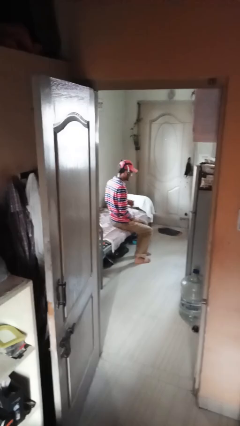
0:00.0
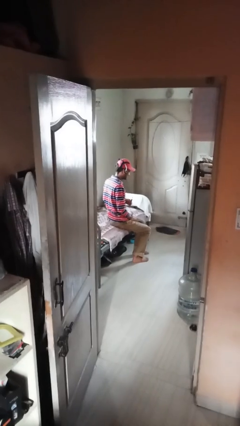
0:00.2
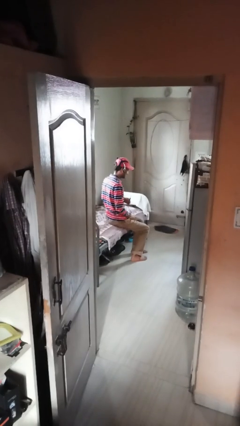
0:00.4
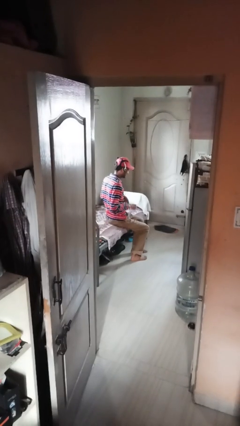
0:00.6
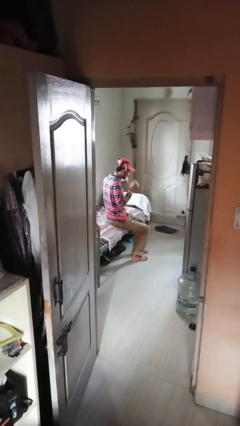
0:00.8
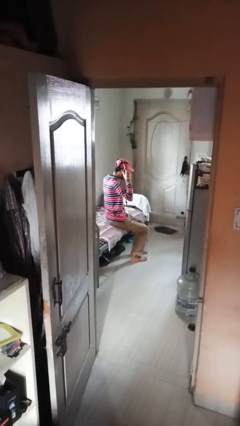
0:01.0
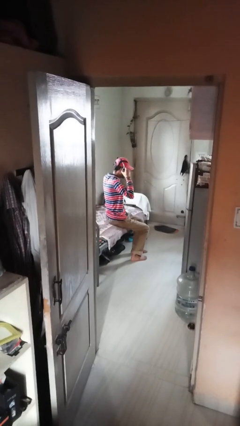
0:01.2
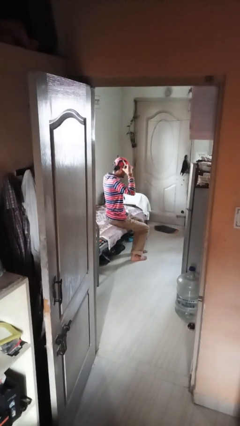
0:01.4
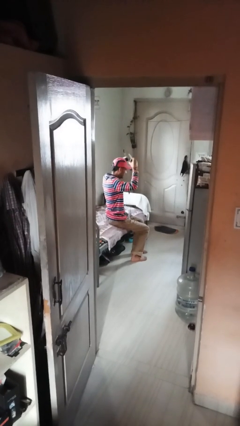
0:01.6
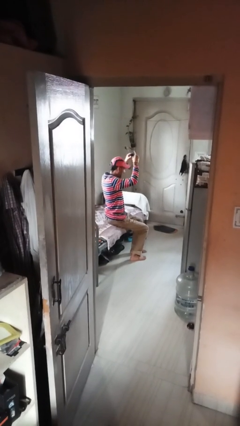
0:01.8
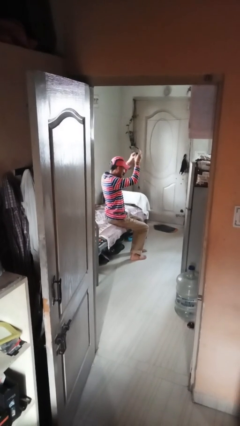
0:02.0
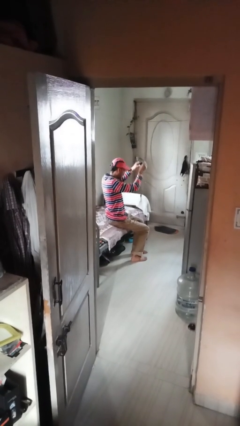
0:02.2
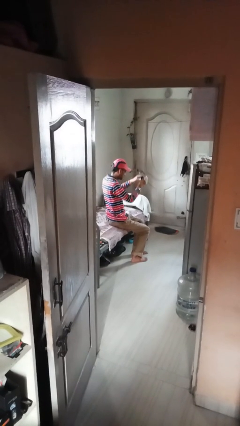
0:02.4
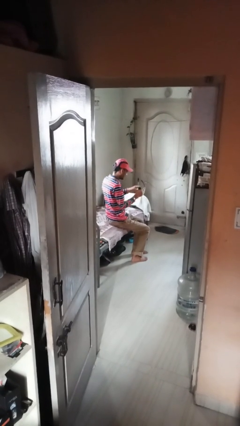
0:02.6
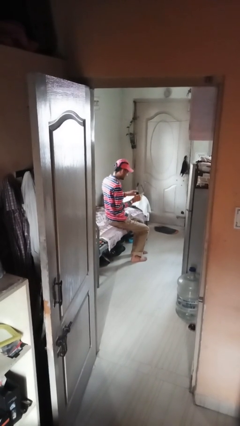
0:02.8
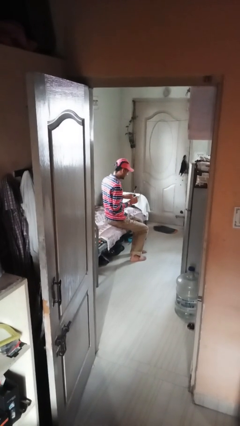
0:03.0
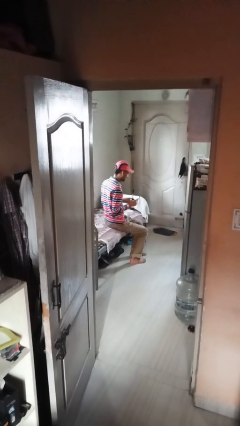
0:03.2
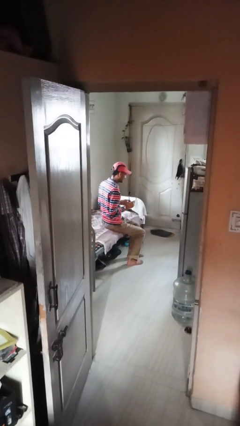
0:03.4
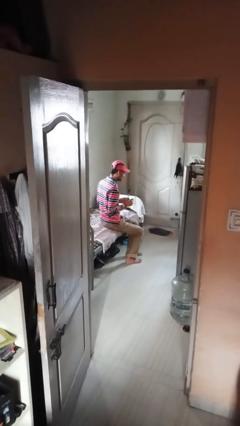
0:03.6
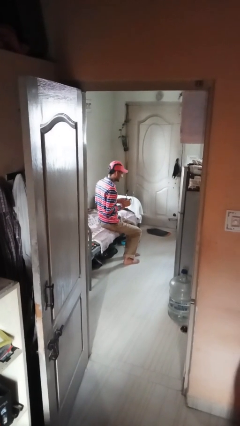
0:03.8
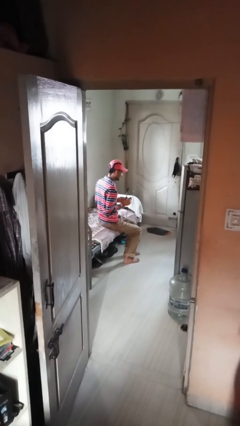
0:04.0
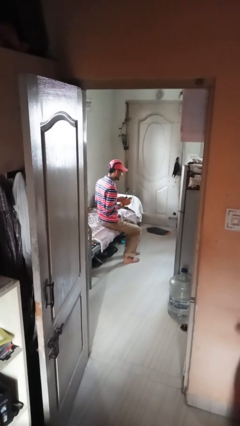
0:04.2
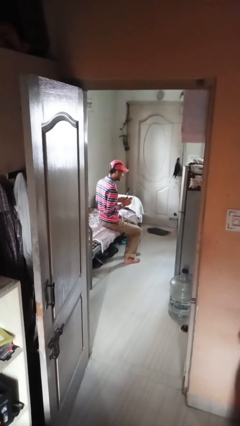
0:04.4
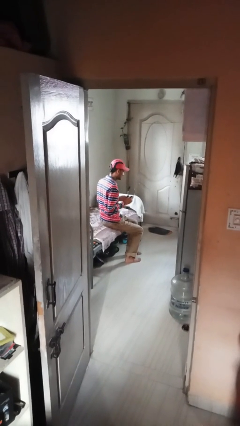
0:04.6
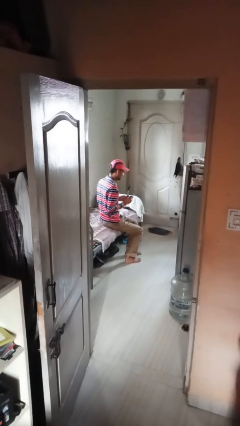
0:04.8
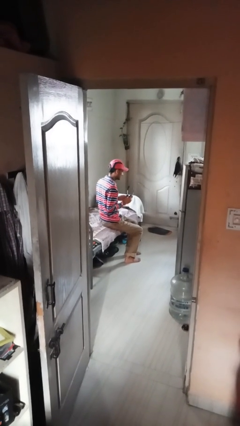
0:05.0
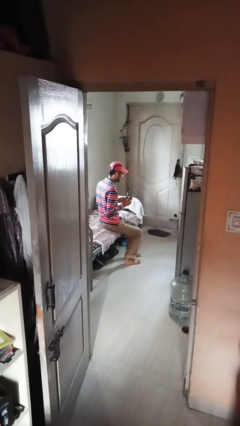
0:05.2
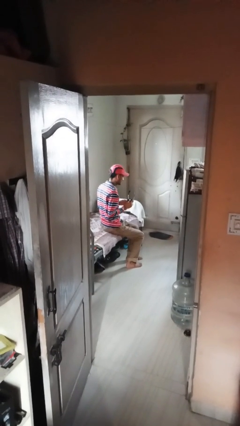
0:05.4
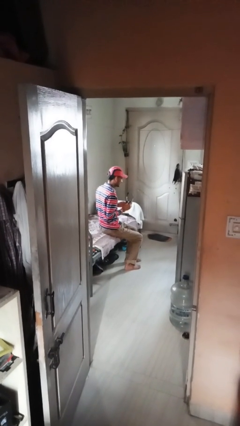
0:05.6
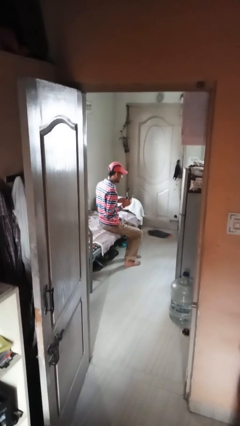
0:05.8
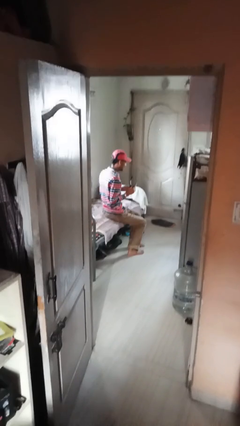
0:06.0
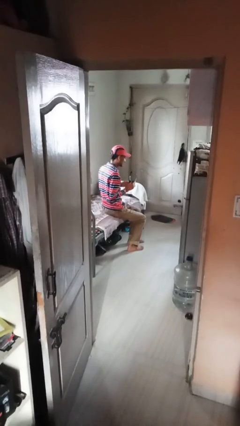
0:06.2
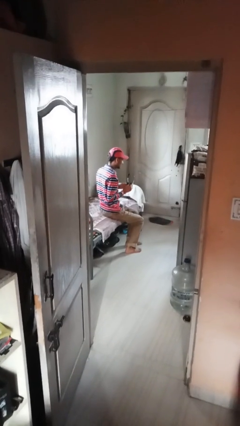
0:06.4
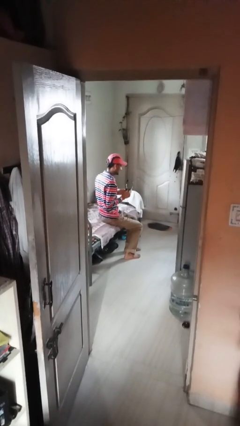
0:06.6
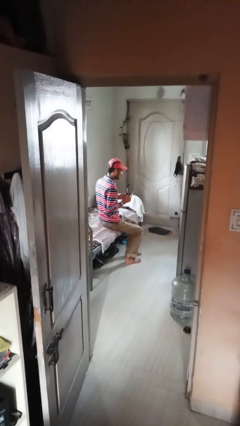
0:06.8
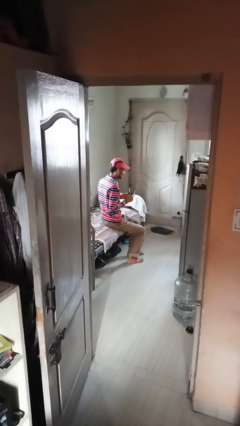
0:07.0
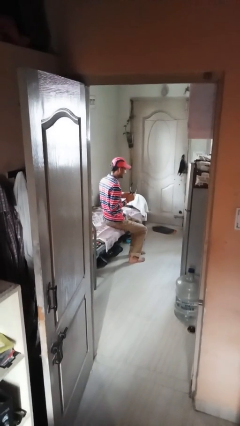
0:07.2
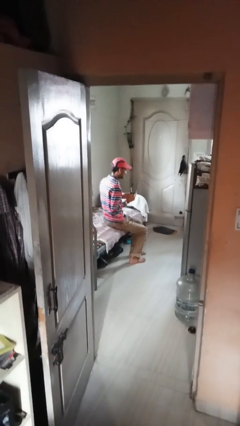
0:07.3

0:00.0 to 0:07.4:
person takes off headphones

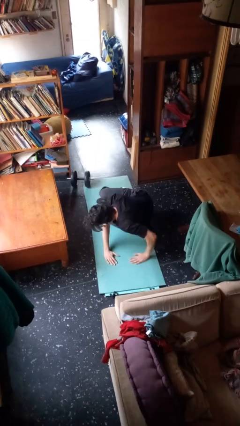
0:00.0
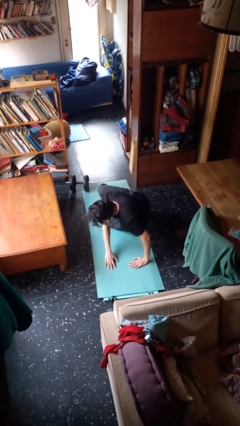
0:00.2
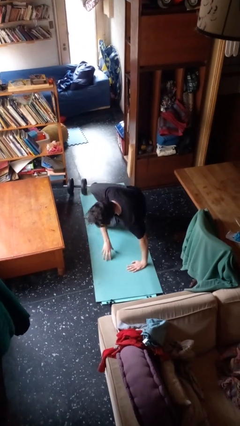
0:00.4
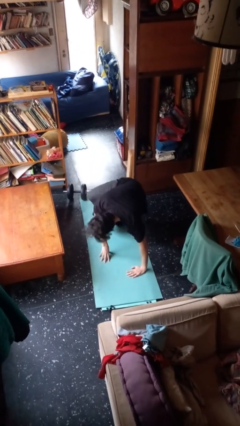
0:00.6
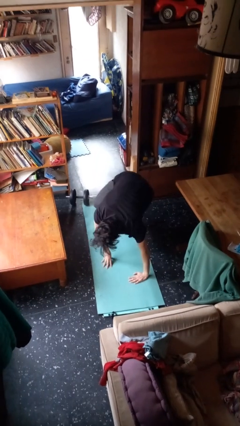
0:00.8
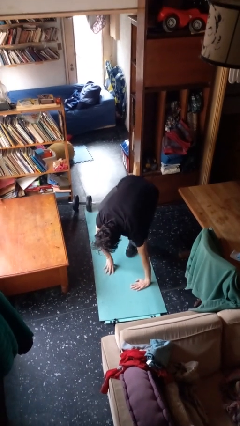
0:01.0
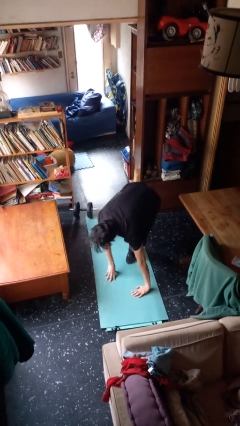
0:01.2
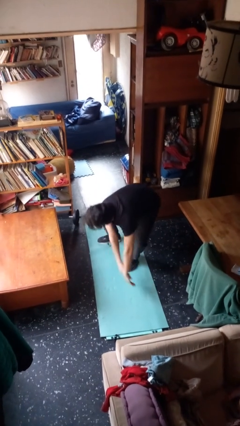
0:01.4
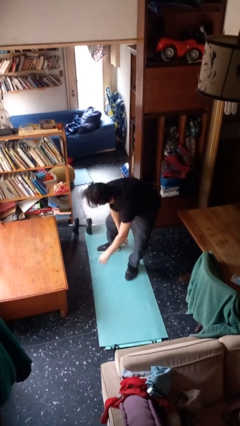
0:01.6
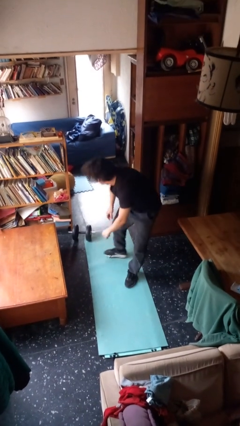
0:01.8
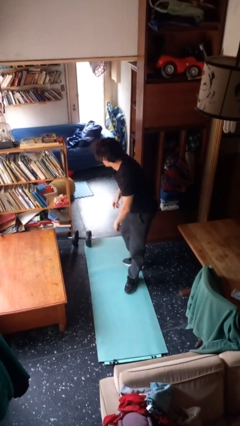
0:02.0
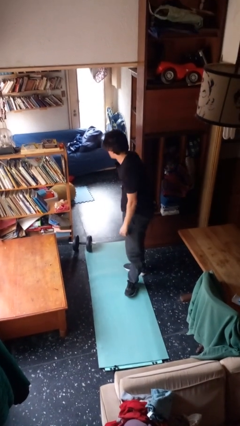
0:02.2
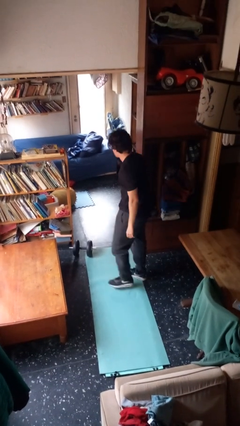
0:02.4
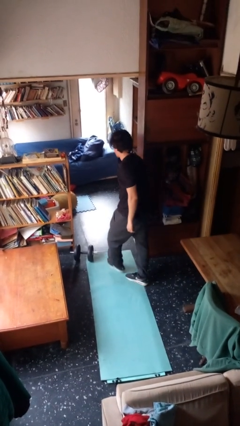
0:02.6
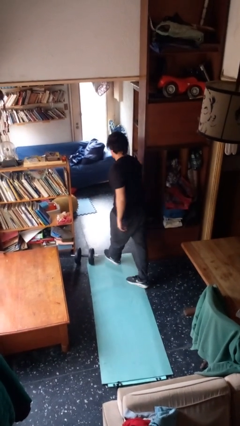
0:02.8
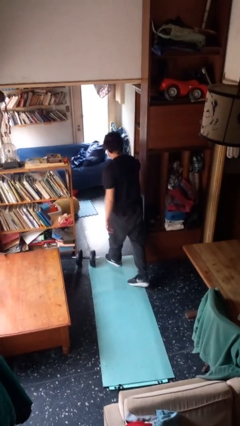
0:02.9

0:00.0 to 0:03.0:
person stands up from floor

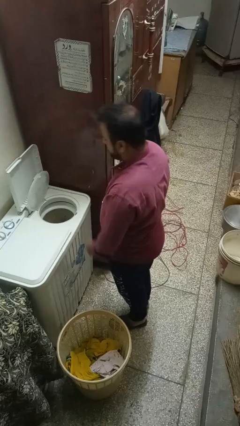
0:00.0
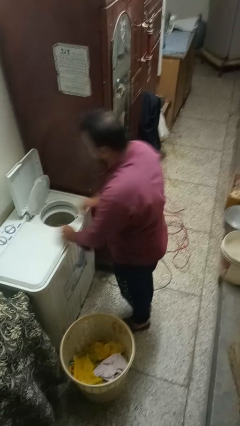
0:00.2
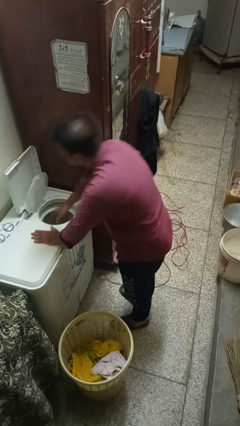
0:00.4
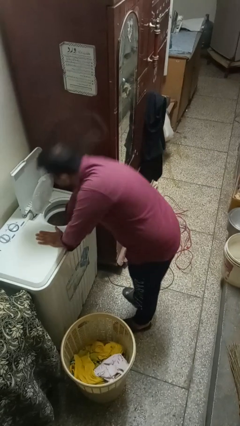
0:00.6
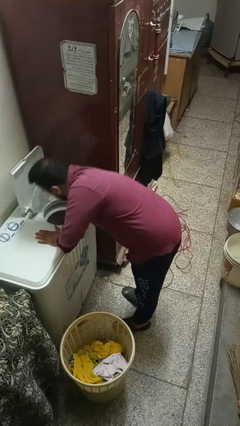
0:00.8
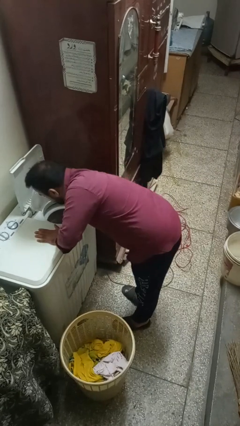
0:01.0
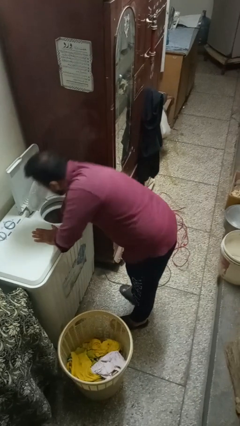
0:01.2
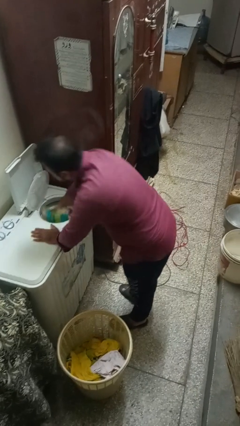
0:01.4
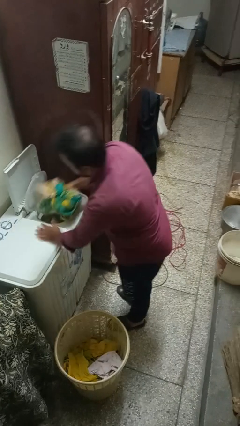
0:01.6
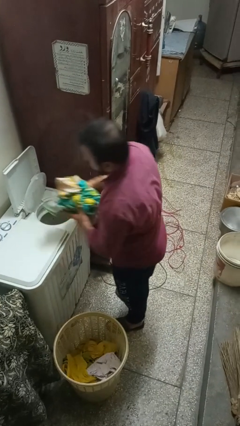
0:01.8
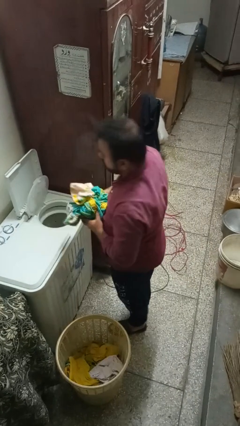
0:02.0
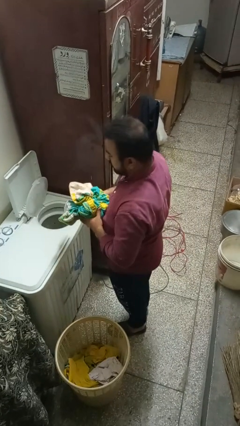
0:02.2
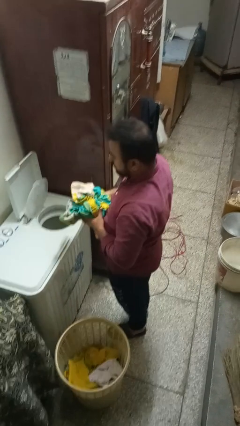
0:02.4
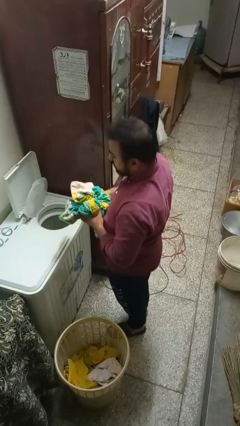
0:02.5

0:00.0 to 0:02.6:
person unloads dryer

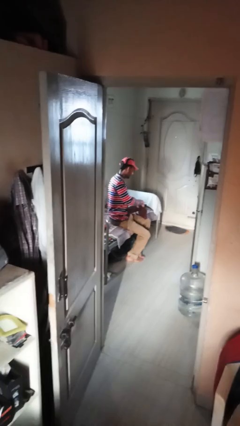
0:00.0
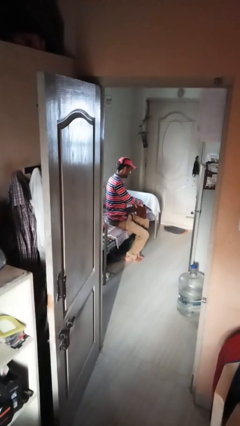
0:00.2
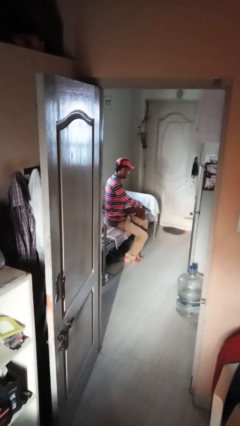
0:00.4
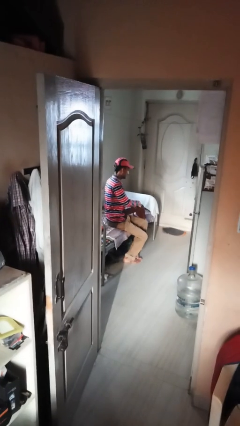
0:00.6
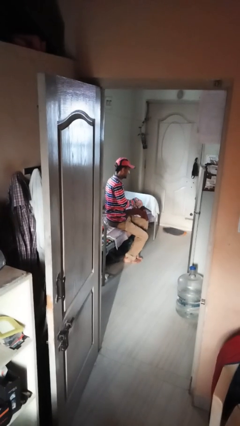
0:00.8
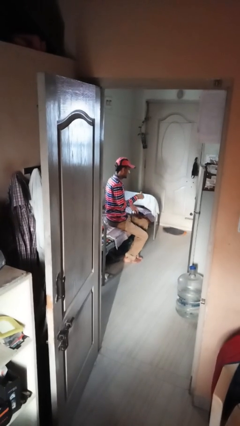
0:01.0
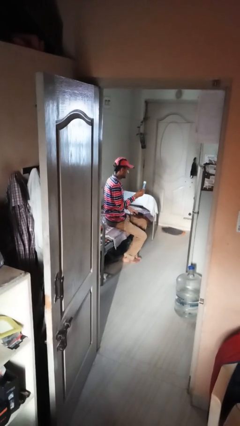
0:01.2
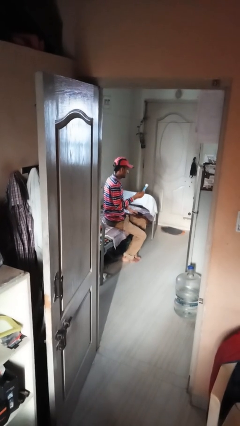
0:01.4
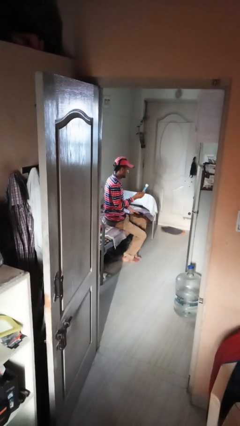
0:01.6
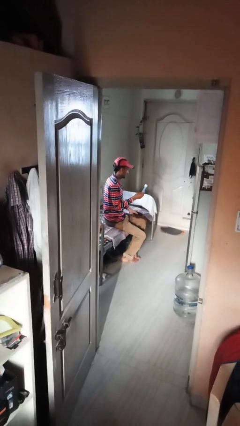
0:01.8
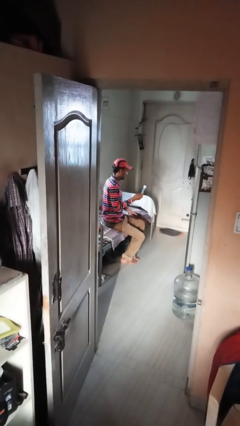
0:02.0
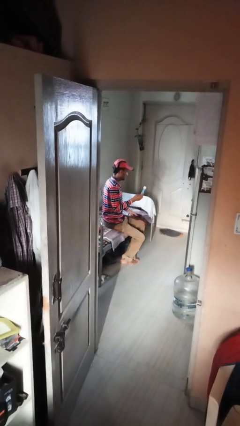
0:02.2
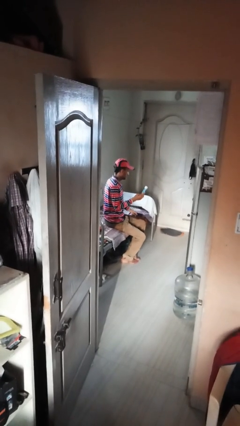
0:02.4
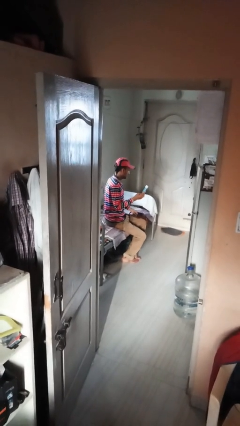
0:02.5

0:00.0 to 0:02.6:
person takes object from purse

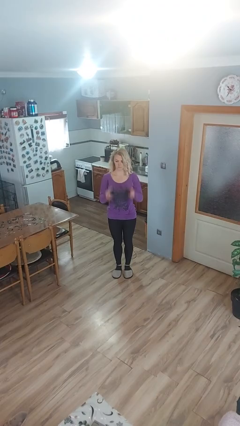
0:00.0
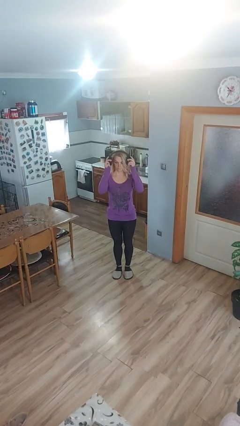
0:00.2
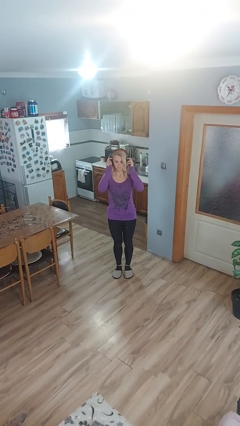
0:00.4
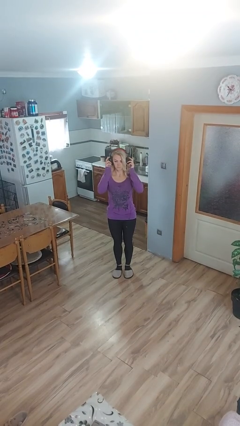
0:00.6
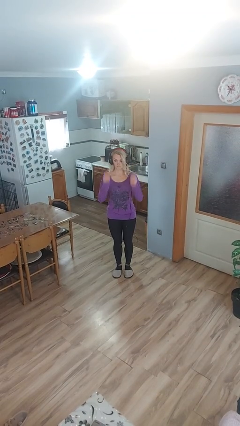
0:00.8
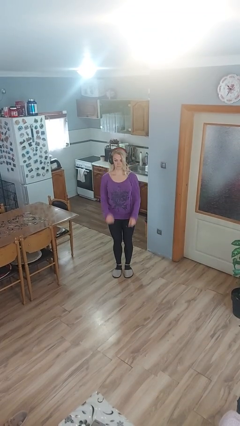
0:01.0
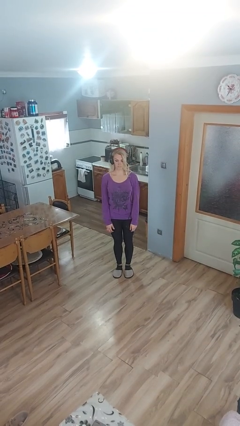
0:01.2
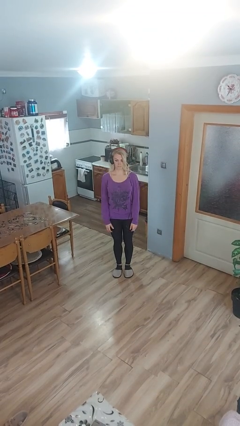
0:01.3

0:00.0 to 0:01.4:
person puts on headphones
